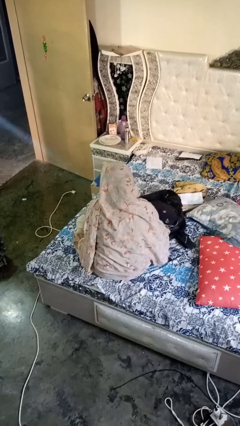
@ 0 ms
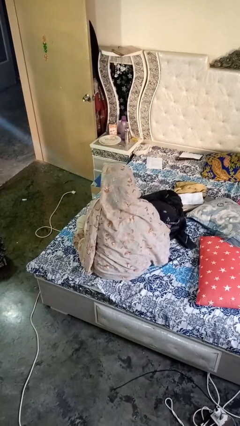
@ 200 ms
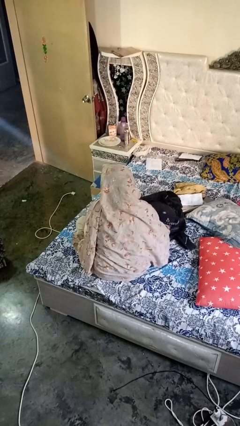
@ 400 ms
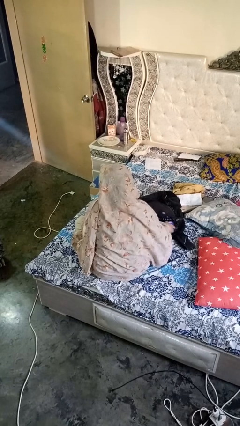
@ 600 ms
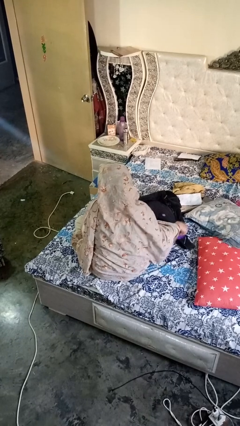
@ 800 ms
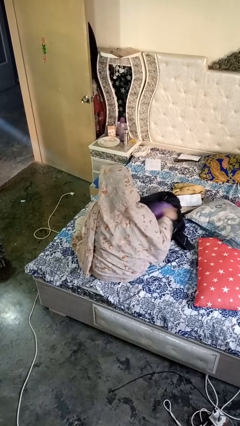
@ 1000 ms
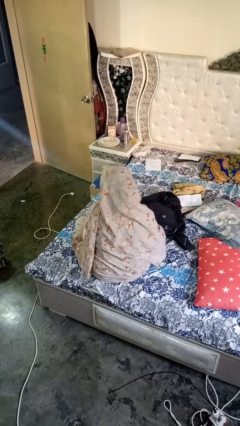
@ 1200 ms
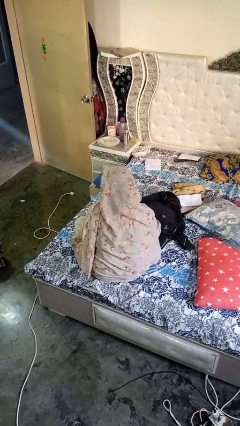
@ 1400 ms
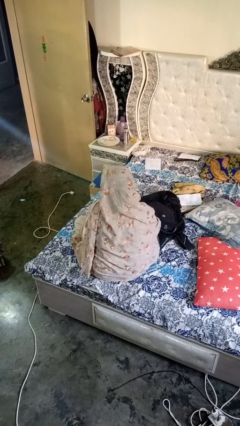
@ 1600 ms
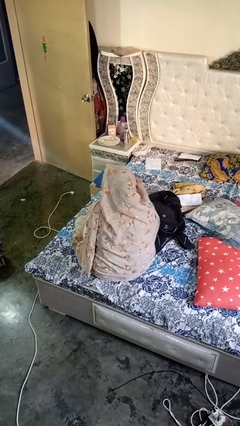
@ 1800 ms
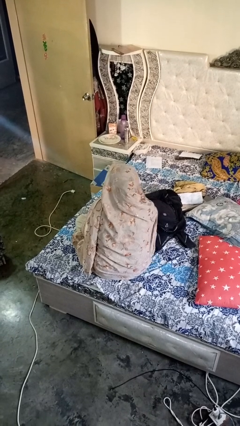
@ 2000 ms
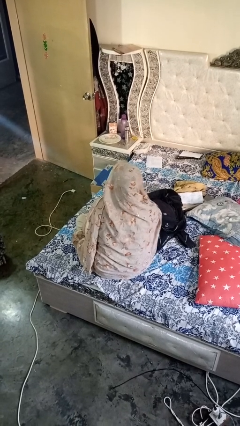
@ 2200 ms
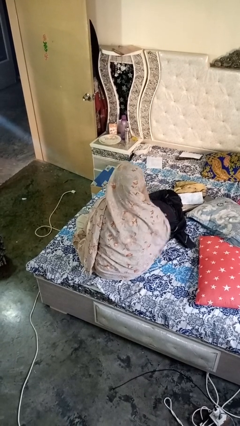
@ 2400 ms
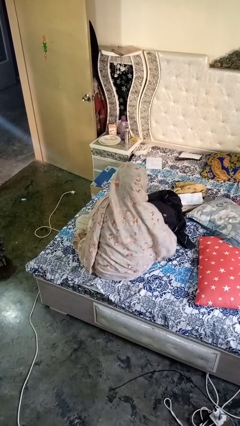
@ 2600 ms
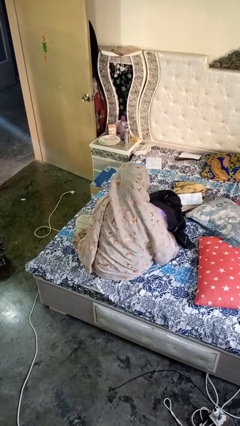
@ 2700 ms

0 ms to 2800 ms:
person eats snack from bag

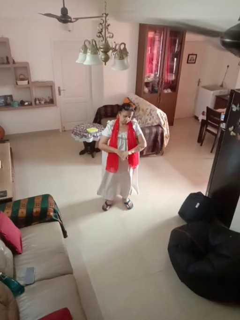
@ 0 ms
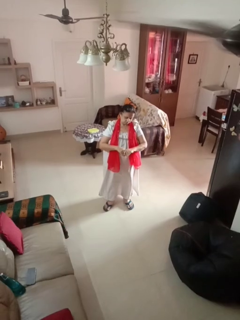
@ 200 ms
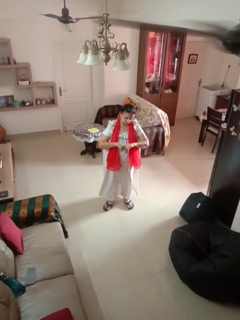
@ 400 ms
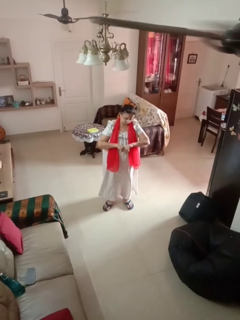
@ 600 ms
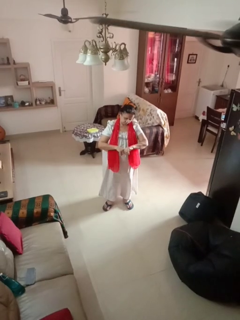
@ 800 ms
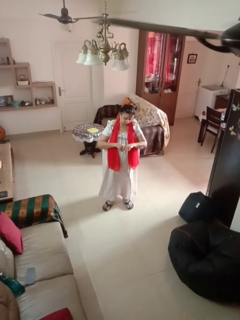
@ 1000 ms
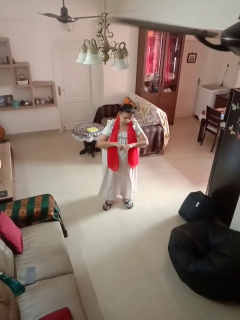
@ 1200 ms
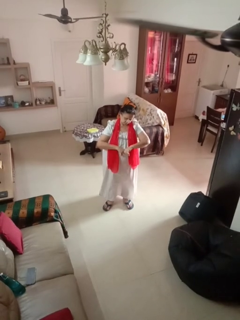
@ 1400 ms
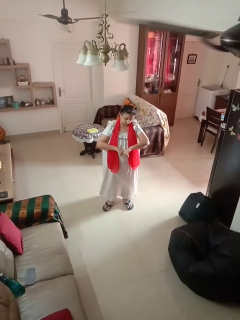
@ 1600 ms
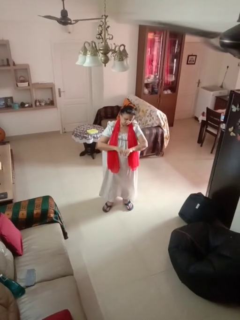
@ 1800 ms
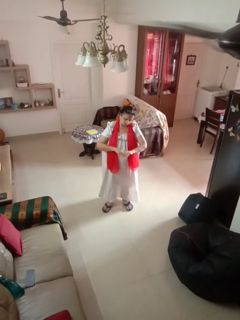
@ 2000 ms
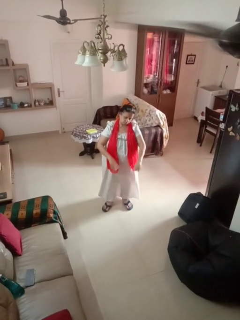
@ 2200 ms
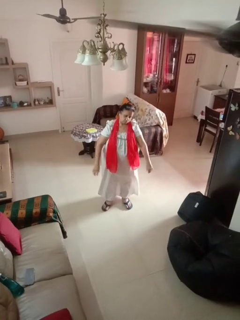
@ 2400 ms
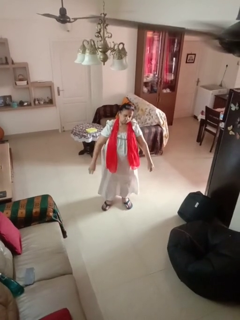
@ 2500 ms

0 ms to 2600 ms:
person cracks knuckles

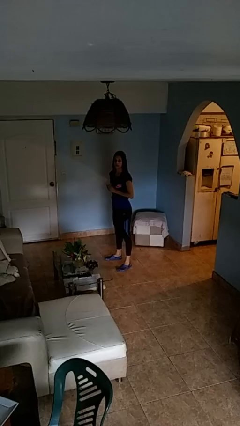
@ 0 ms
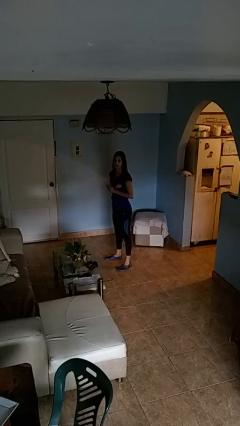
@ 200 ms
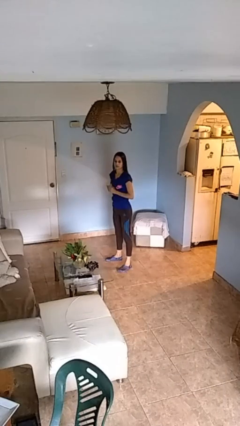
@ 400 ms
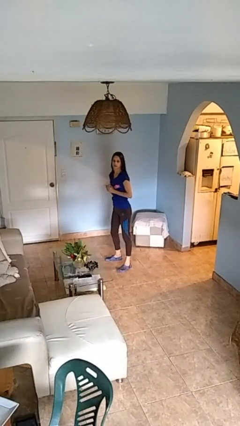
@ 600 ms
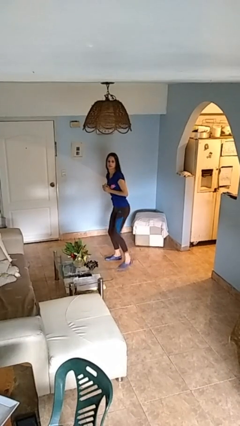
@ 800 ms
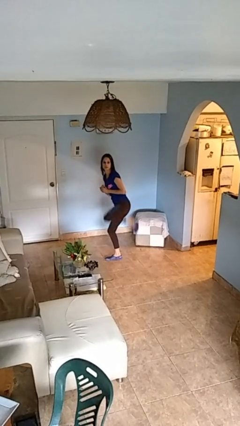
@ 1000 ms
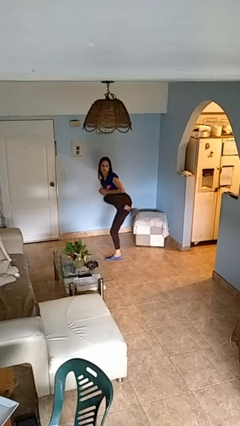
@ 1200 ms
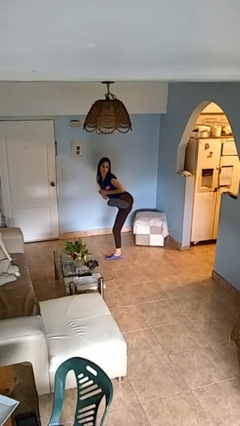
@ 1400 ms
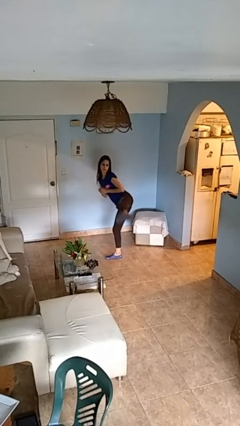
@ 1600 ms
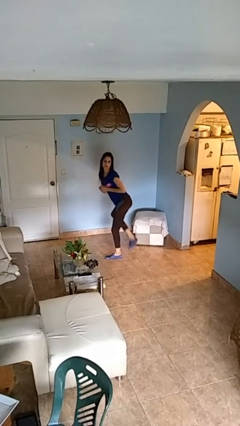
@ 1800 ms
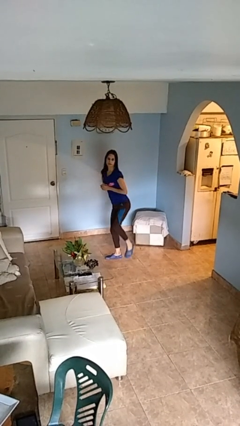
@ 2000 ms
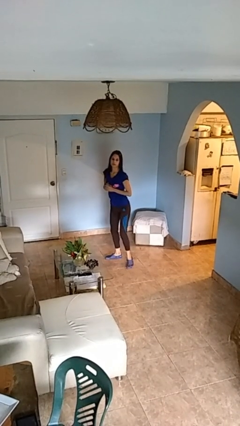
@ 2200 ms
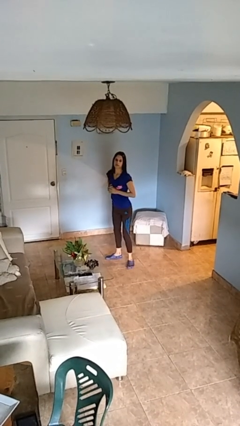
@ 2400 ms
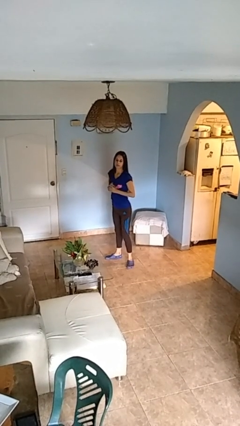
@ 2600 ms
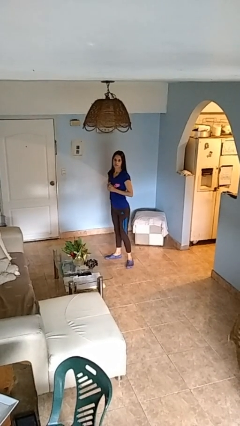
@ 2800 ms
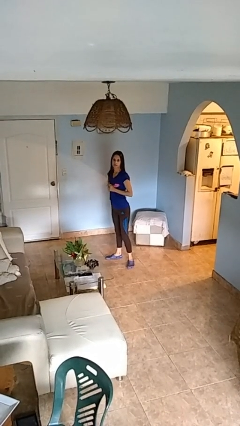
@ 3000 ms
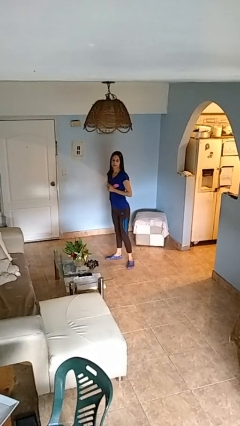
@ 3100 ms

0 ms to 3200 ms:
person karate kicks

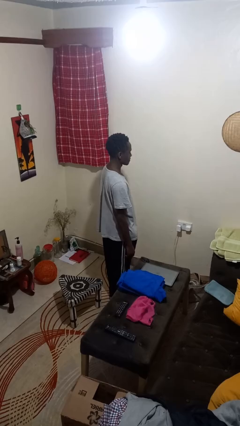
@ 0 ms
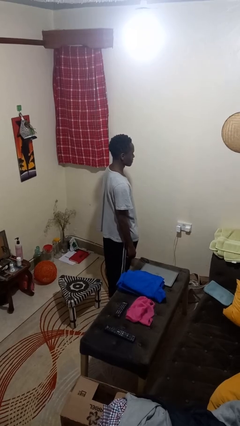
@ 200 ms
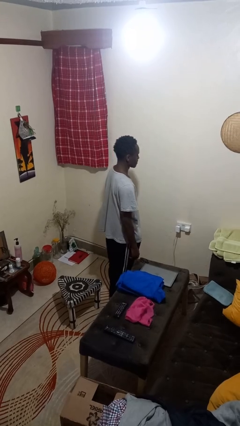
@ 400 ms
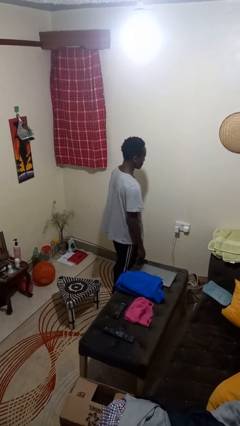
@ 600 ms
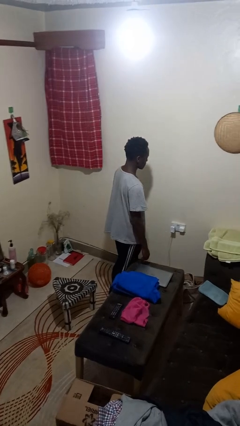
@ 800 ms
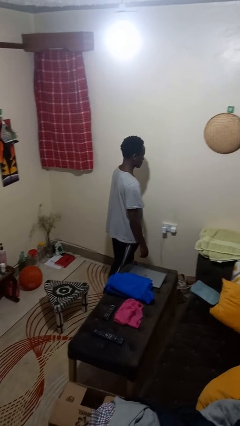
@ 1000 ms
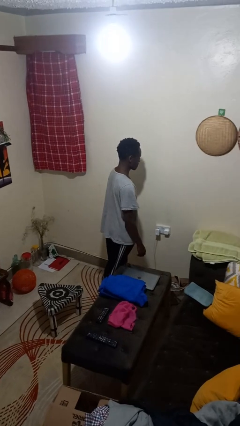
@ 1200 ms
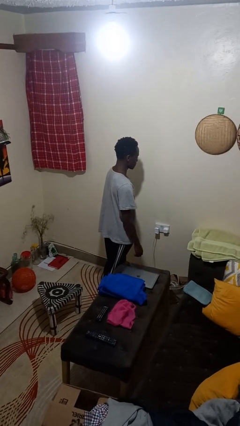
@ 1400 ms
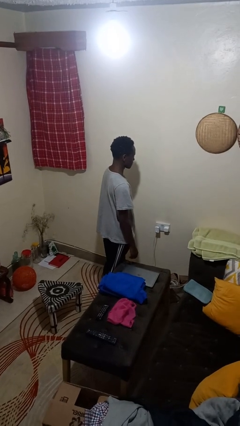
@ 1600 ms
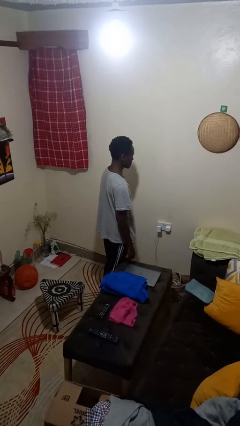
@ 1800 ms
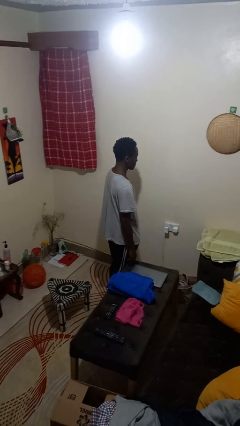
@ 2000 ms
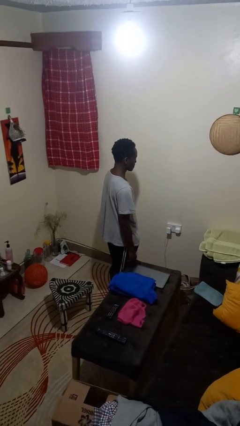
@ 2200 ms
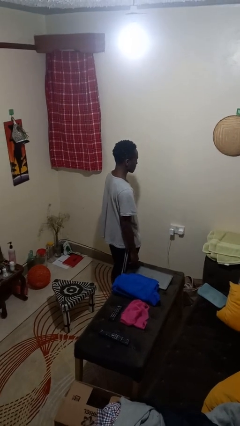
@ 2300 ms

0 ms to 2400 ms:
person bumps into table

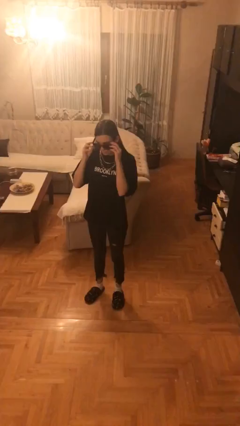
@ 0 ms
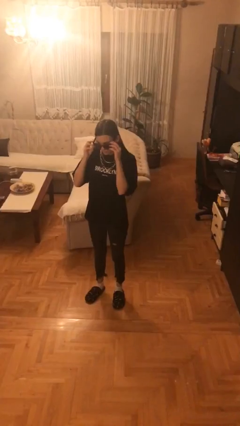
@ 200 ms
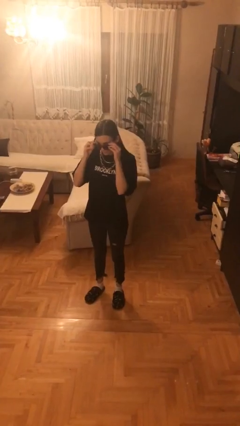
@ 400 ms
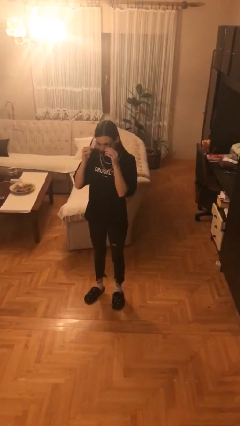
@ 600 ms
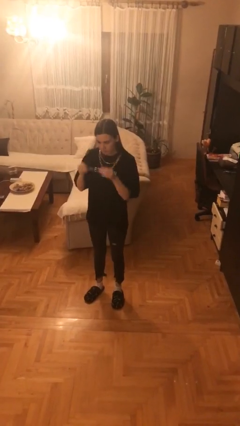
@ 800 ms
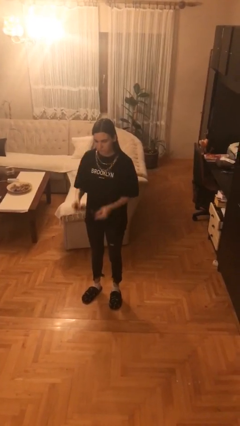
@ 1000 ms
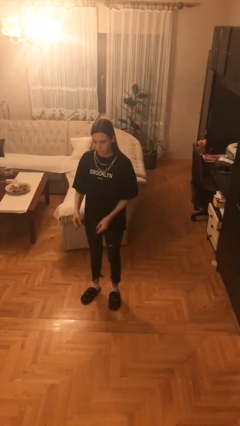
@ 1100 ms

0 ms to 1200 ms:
person takes off sunglasses

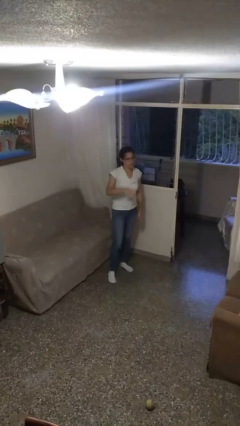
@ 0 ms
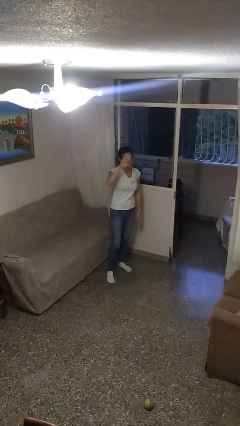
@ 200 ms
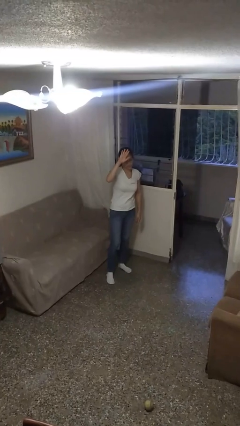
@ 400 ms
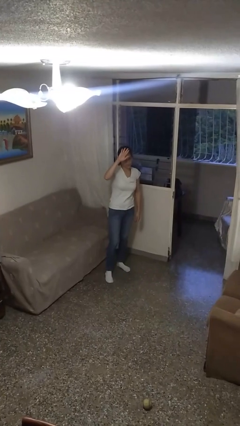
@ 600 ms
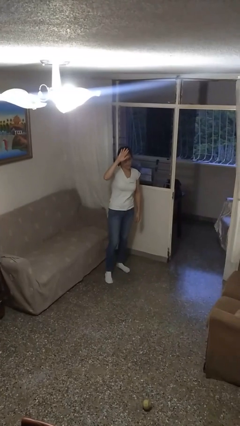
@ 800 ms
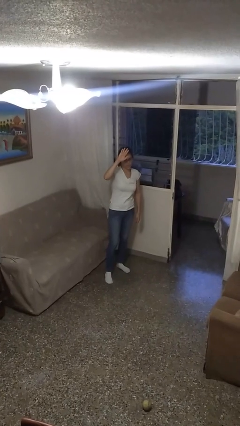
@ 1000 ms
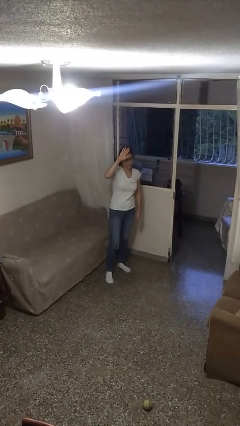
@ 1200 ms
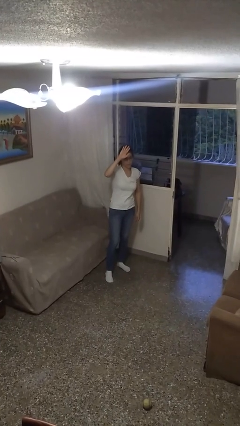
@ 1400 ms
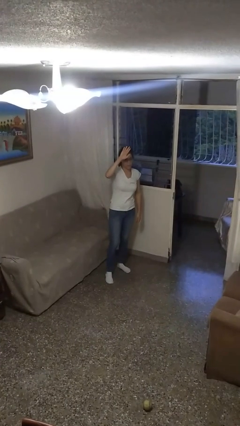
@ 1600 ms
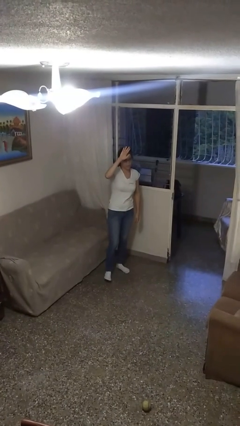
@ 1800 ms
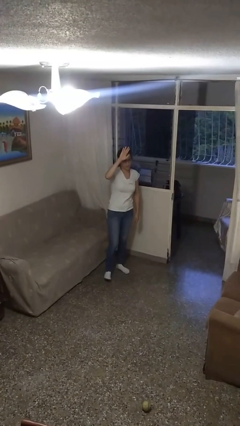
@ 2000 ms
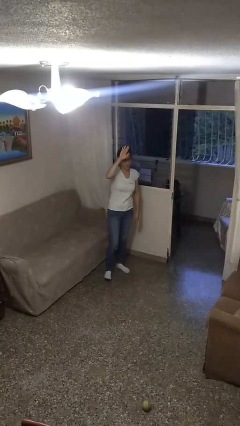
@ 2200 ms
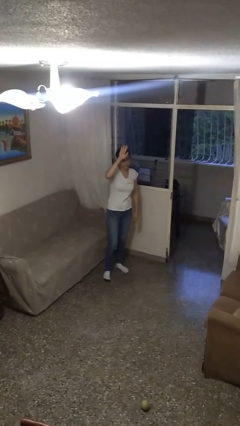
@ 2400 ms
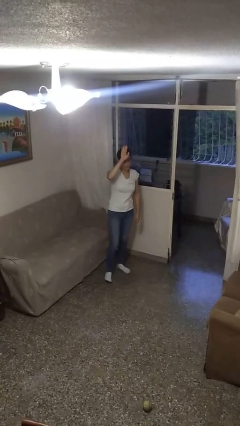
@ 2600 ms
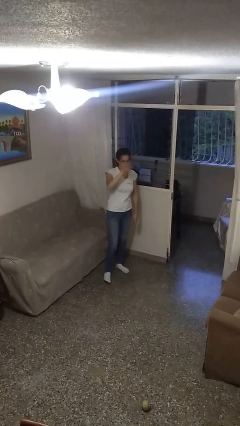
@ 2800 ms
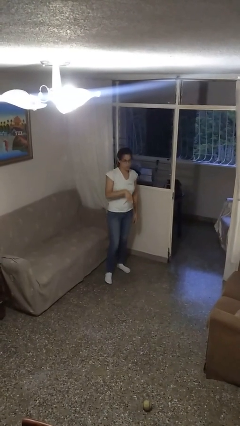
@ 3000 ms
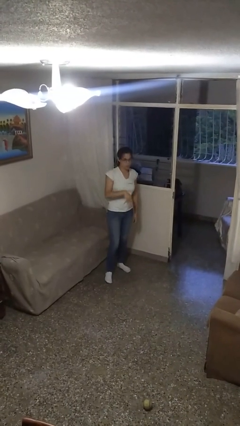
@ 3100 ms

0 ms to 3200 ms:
person gestures swipe up

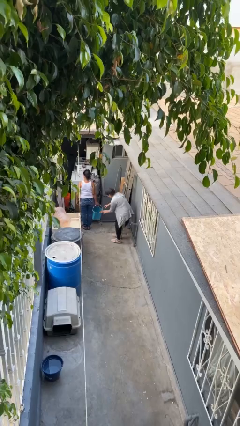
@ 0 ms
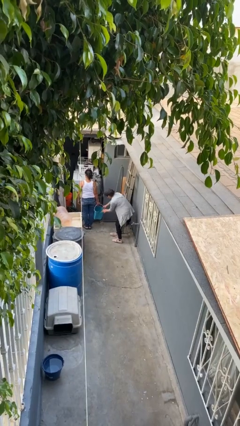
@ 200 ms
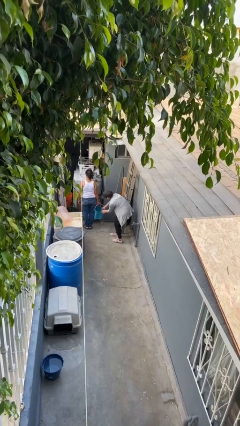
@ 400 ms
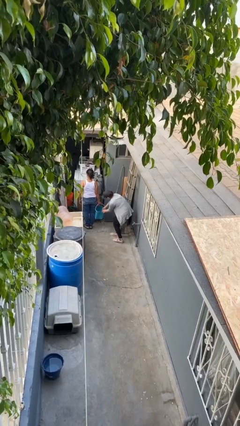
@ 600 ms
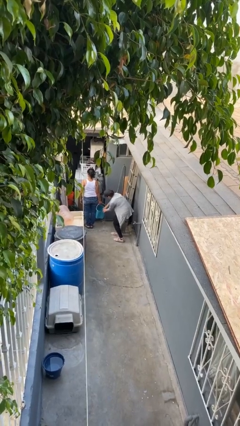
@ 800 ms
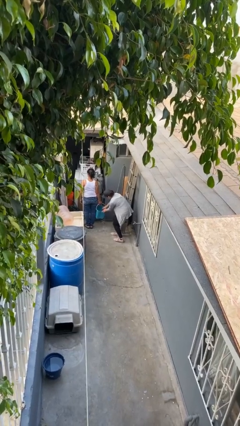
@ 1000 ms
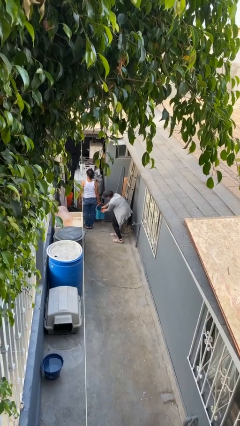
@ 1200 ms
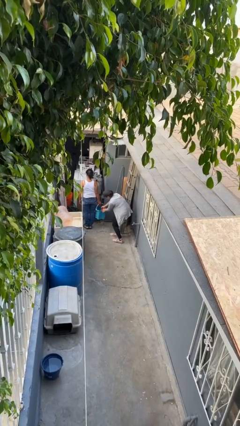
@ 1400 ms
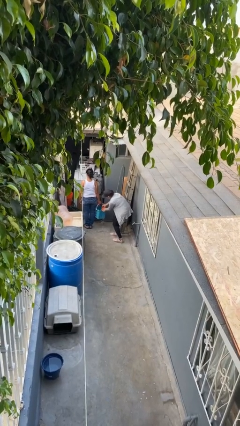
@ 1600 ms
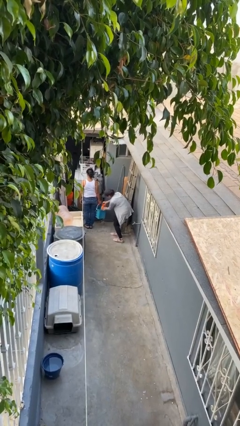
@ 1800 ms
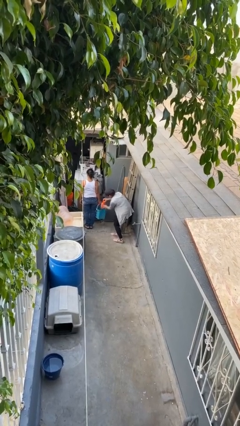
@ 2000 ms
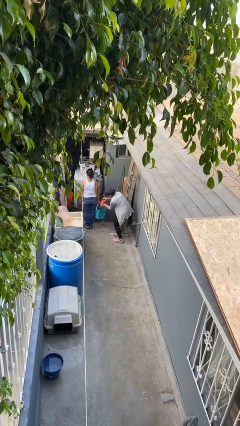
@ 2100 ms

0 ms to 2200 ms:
person steals object from person

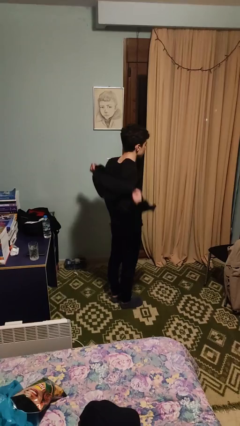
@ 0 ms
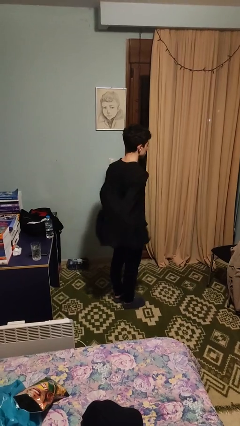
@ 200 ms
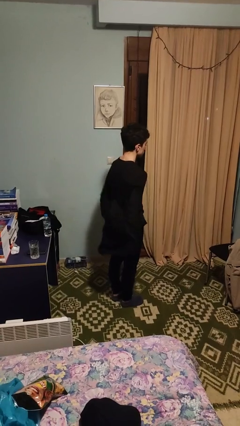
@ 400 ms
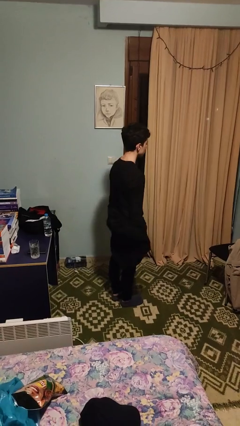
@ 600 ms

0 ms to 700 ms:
person takes off jacket
